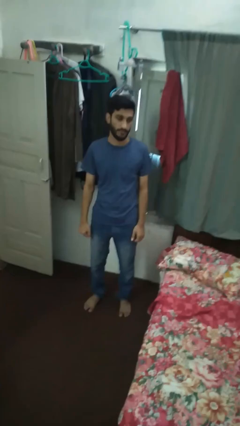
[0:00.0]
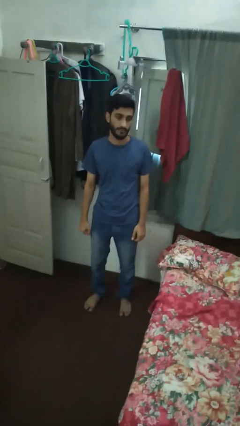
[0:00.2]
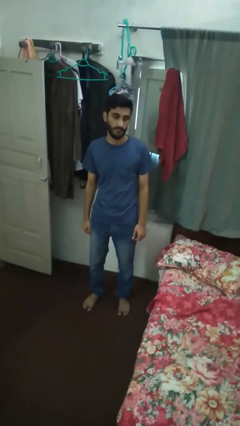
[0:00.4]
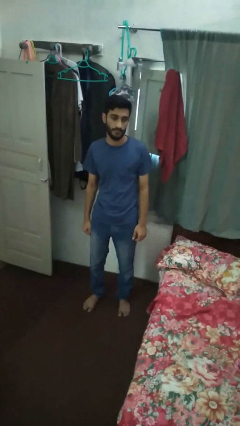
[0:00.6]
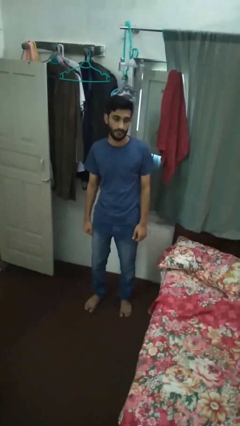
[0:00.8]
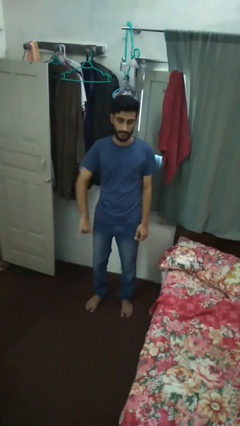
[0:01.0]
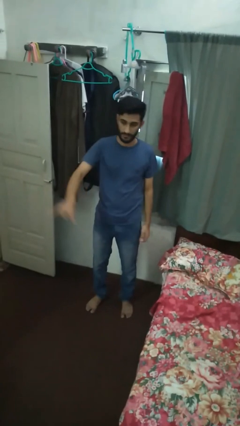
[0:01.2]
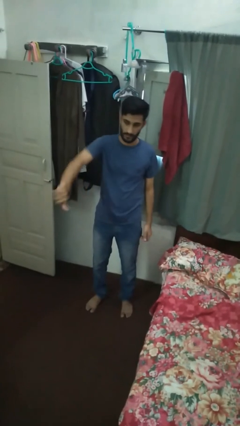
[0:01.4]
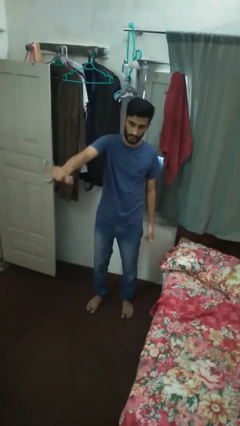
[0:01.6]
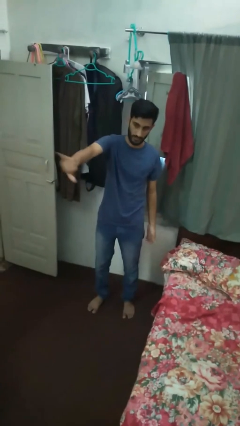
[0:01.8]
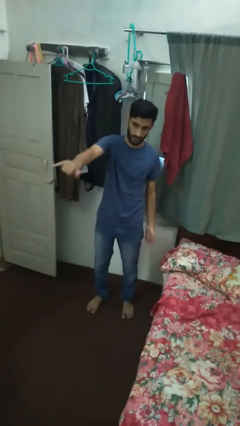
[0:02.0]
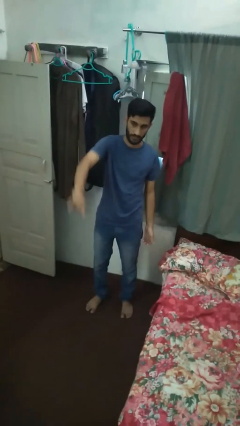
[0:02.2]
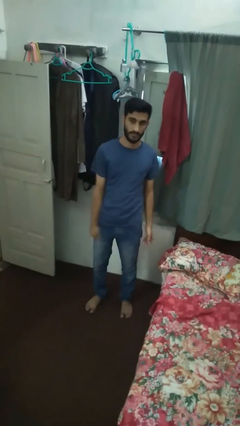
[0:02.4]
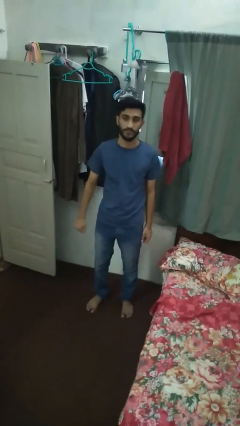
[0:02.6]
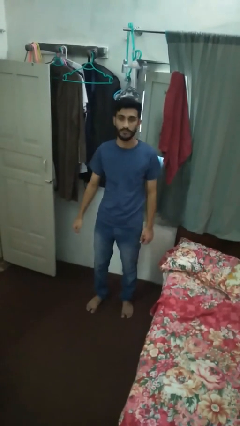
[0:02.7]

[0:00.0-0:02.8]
person gestures hang loose

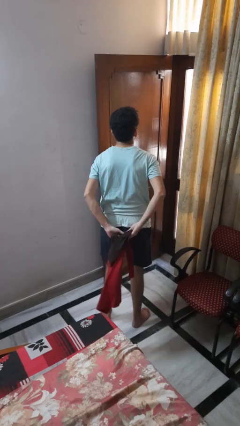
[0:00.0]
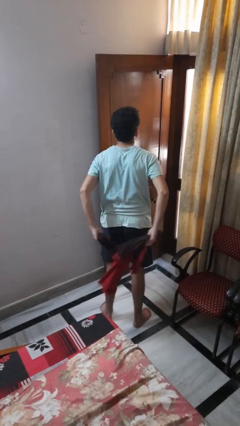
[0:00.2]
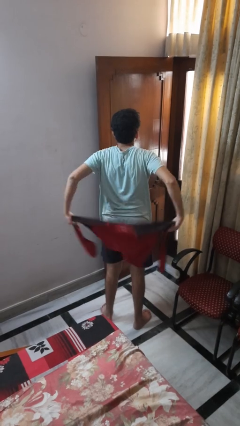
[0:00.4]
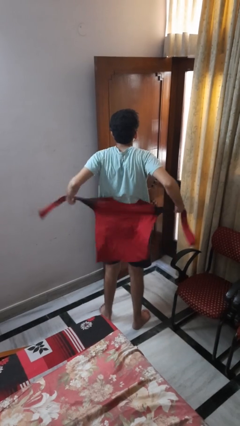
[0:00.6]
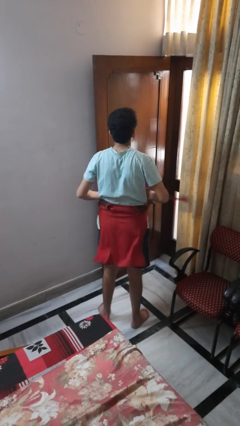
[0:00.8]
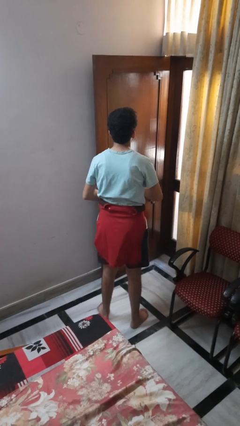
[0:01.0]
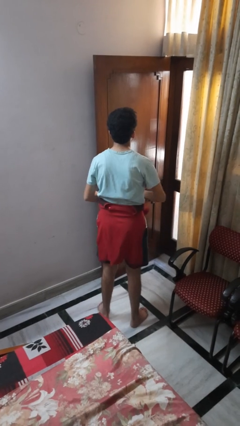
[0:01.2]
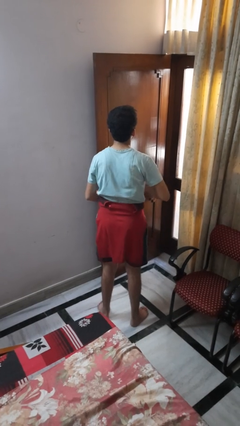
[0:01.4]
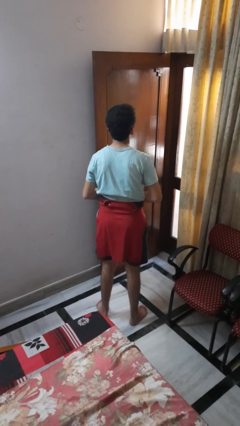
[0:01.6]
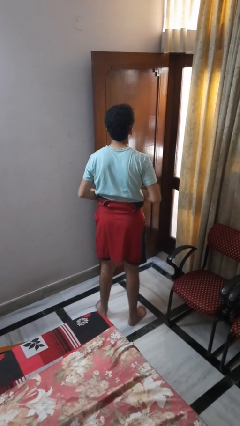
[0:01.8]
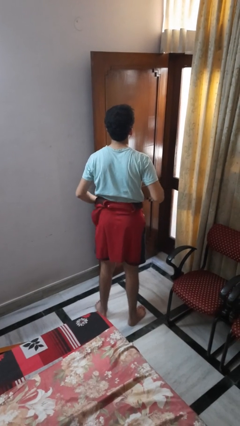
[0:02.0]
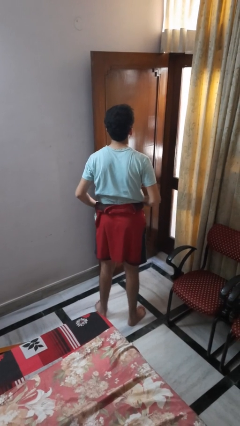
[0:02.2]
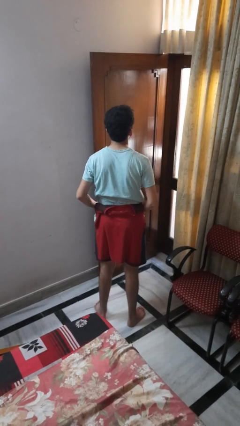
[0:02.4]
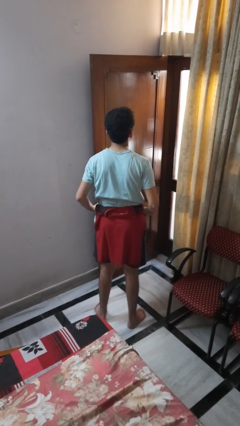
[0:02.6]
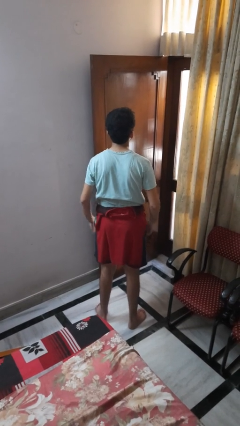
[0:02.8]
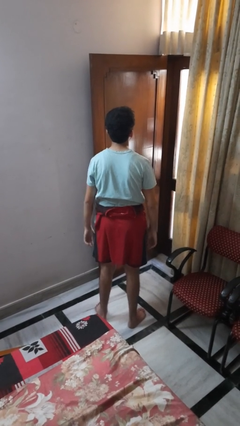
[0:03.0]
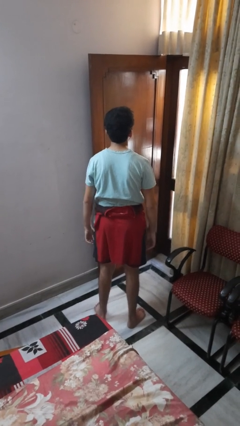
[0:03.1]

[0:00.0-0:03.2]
person ties jacket around waist

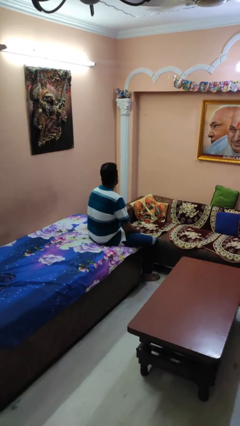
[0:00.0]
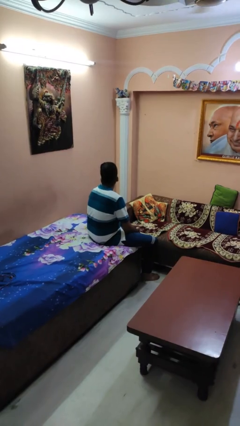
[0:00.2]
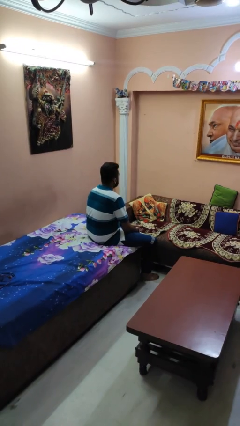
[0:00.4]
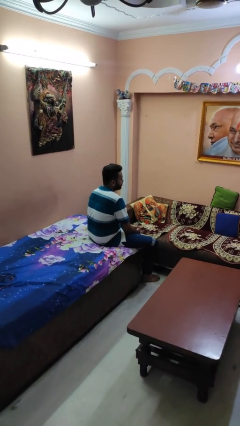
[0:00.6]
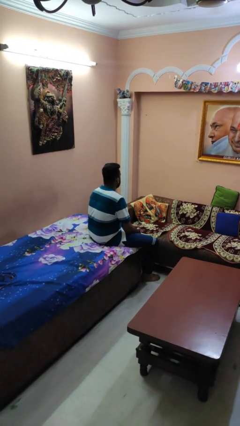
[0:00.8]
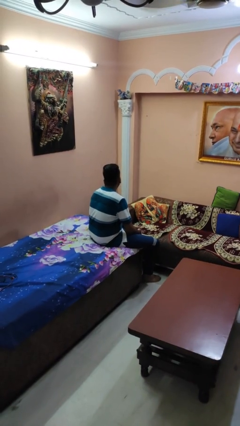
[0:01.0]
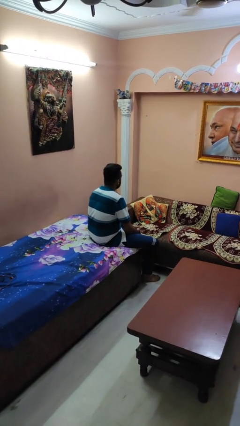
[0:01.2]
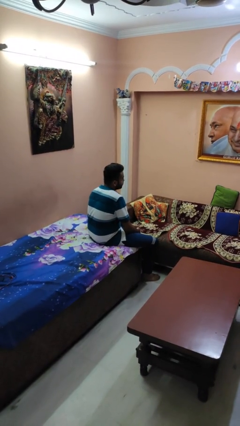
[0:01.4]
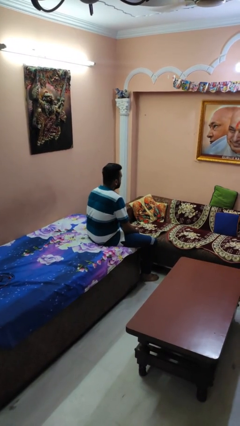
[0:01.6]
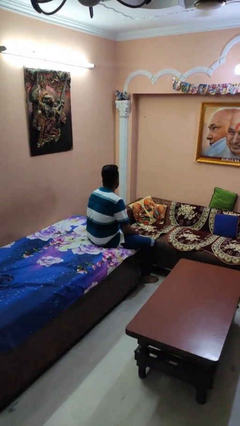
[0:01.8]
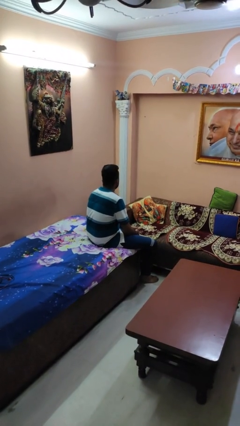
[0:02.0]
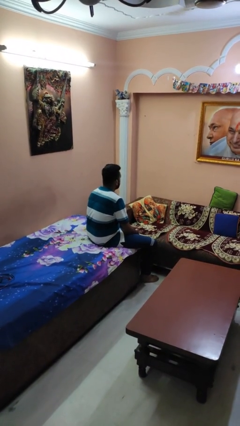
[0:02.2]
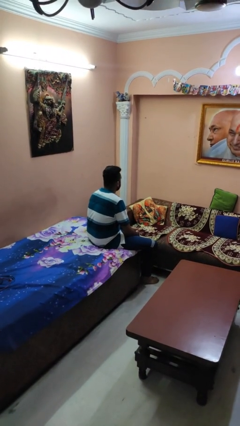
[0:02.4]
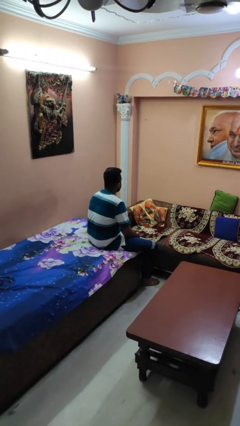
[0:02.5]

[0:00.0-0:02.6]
person shakes head

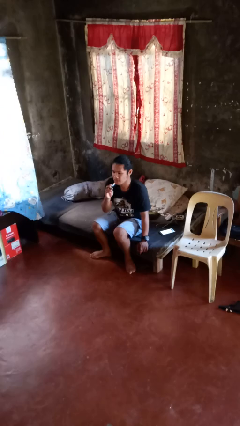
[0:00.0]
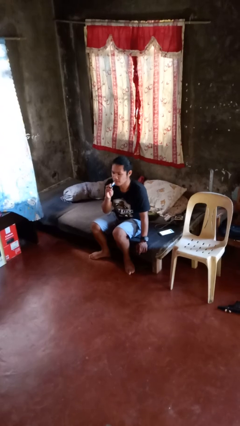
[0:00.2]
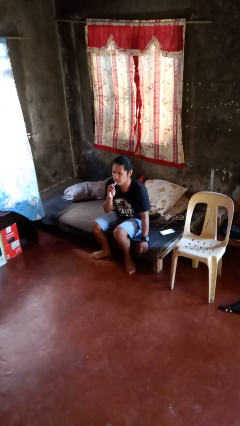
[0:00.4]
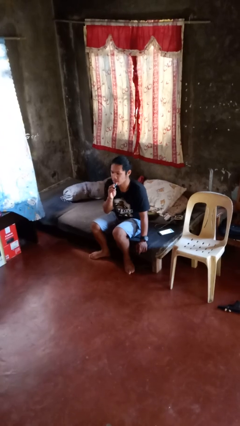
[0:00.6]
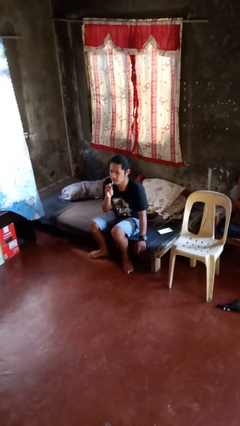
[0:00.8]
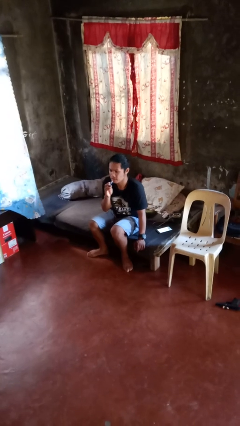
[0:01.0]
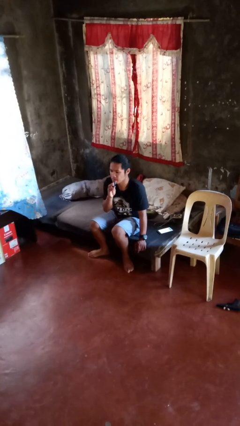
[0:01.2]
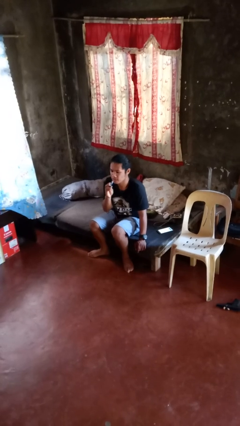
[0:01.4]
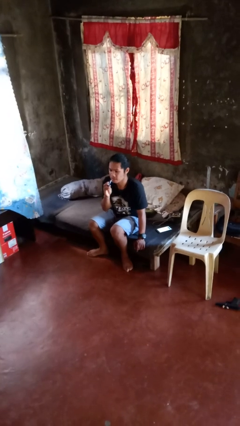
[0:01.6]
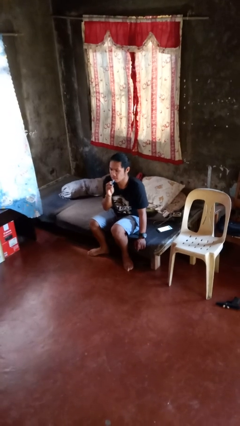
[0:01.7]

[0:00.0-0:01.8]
person applies lip makeup

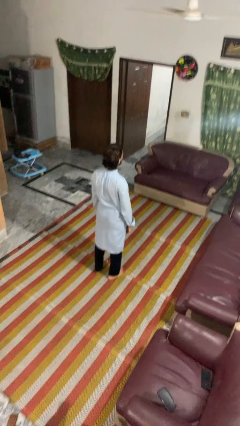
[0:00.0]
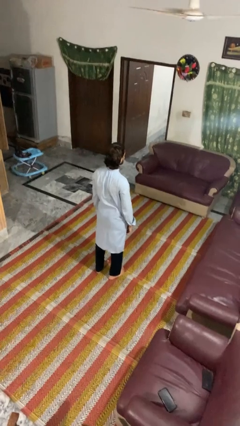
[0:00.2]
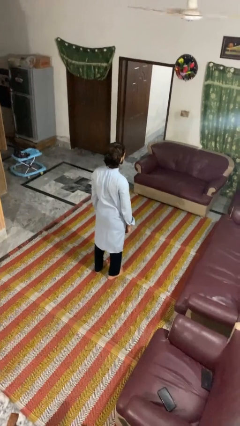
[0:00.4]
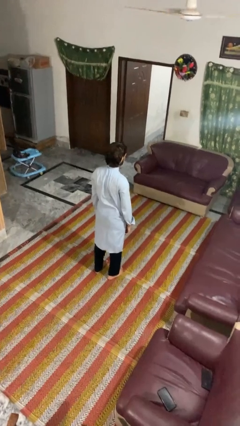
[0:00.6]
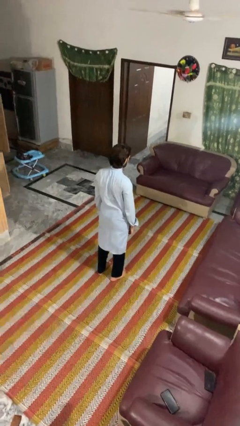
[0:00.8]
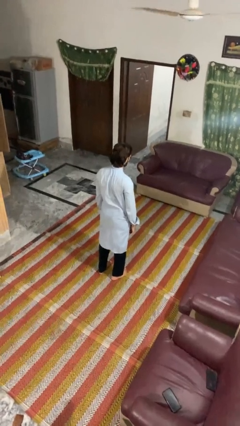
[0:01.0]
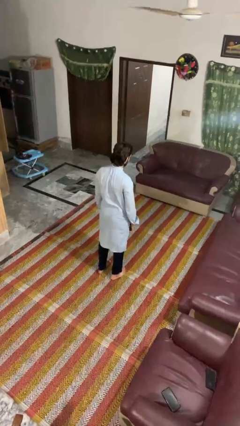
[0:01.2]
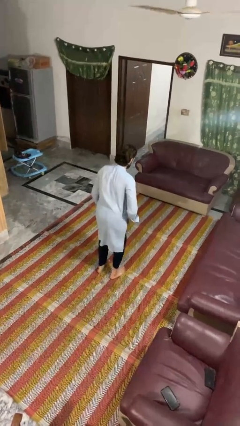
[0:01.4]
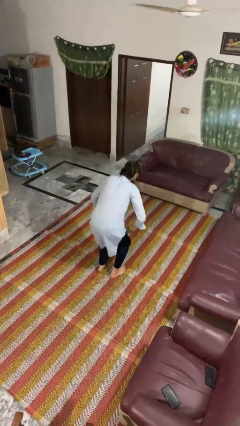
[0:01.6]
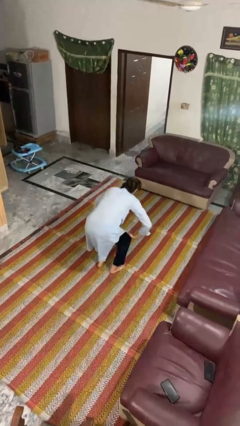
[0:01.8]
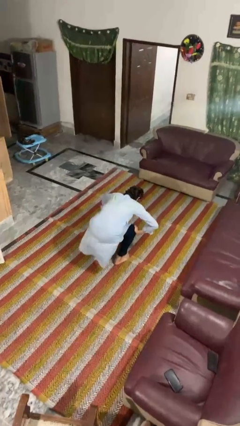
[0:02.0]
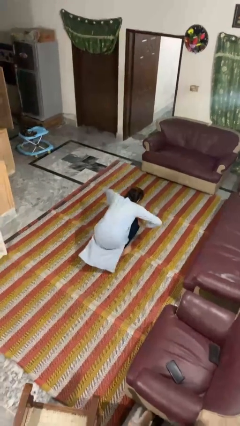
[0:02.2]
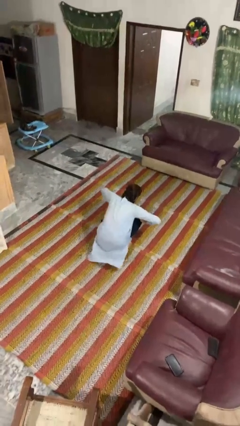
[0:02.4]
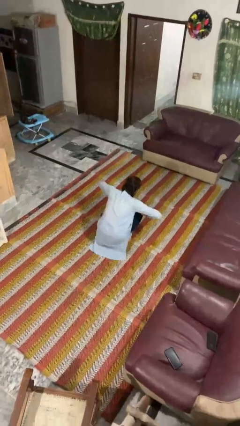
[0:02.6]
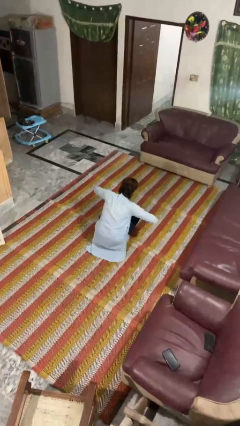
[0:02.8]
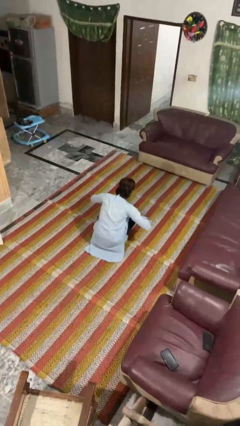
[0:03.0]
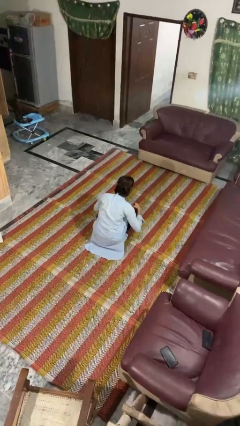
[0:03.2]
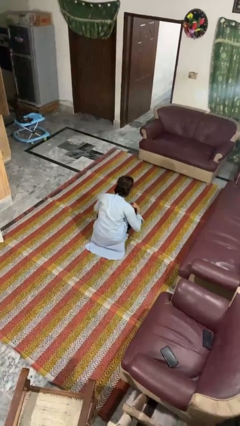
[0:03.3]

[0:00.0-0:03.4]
person squats

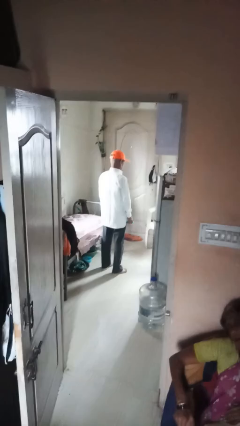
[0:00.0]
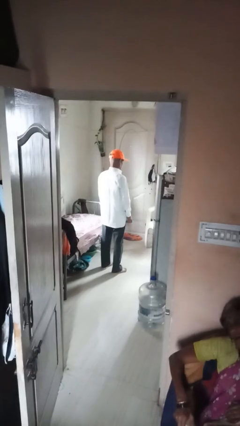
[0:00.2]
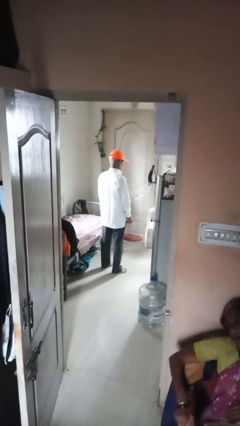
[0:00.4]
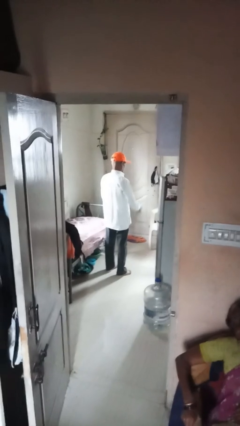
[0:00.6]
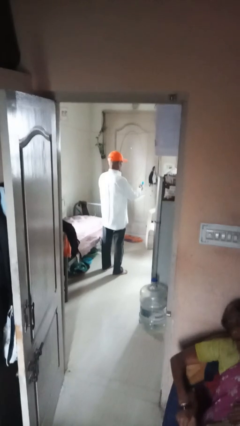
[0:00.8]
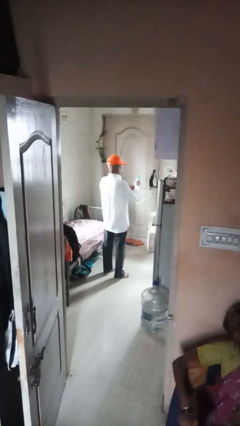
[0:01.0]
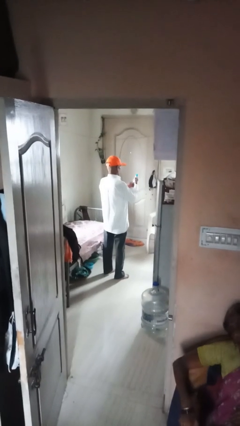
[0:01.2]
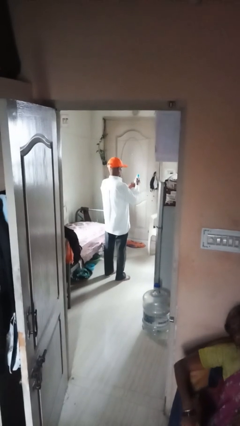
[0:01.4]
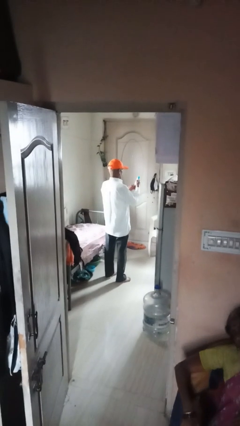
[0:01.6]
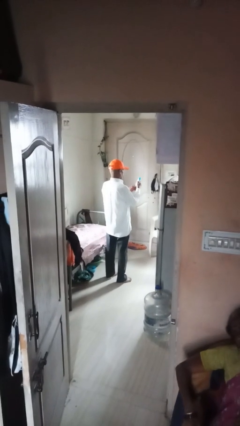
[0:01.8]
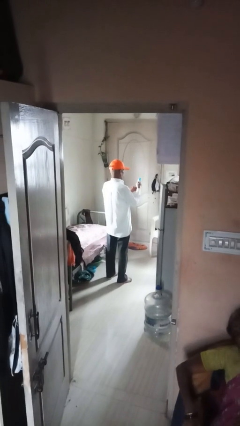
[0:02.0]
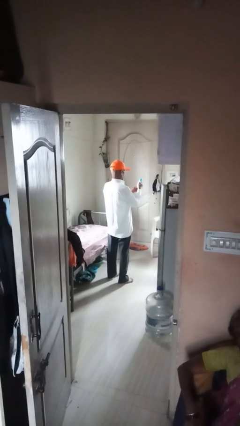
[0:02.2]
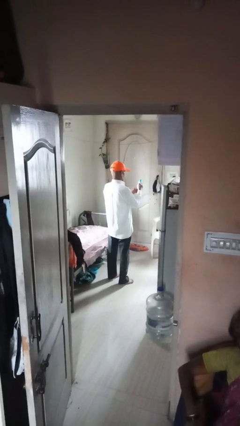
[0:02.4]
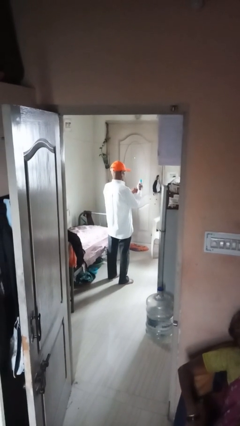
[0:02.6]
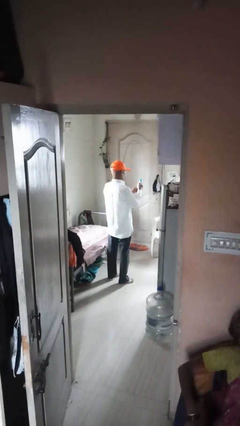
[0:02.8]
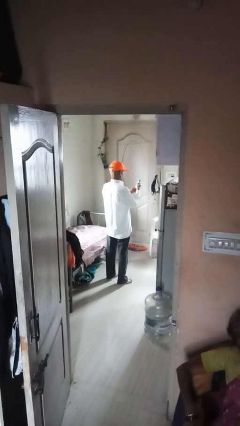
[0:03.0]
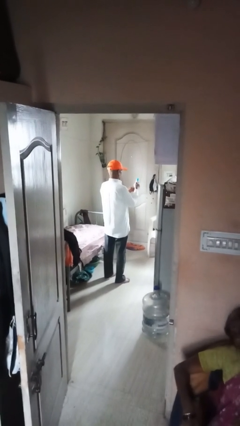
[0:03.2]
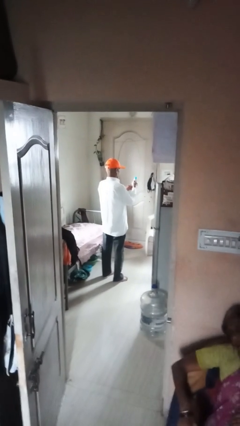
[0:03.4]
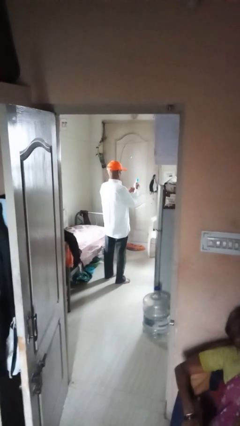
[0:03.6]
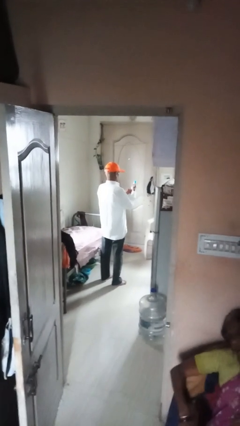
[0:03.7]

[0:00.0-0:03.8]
person squeezes object

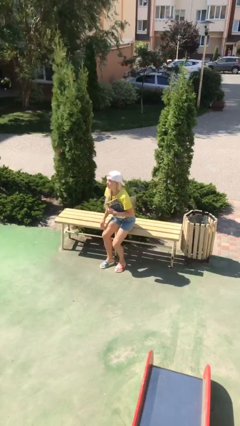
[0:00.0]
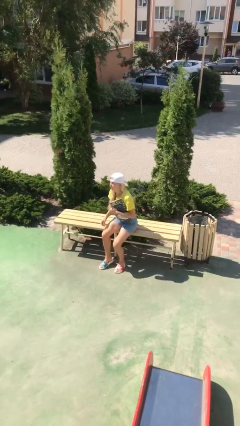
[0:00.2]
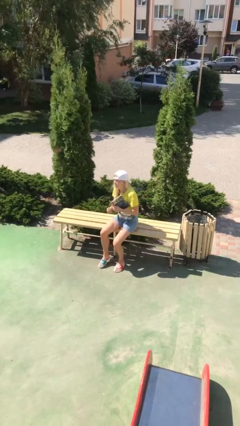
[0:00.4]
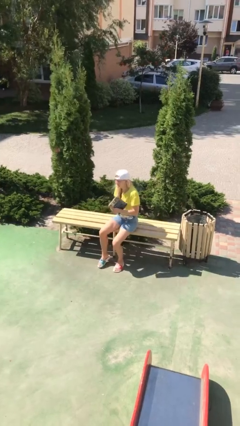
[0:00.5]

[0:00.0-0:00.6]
person sits down
